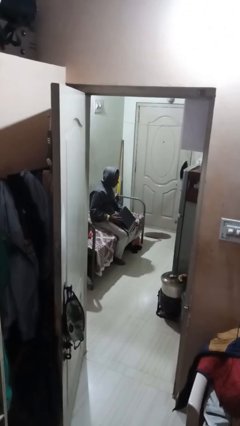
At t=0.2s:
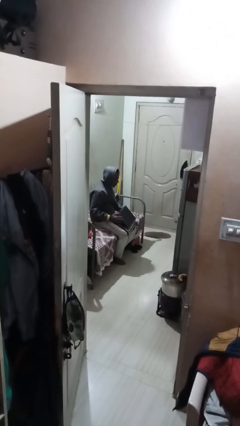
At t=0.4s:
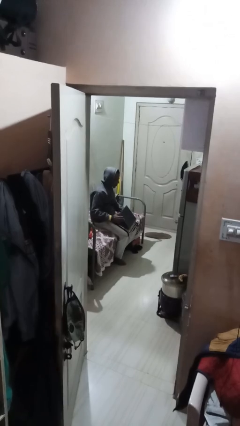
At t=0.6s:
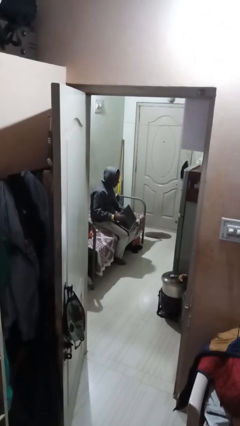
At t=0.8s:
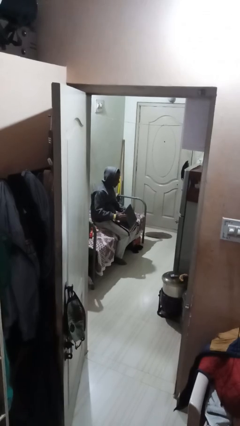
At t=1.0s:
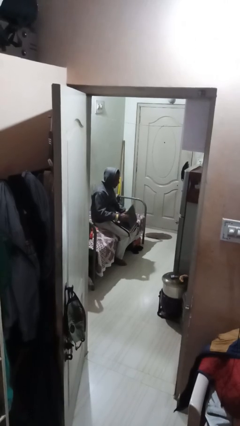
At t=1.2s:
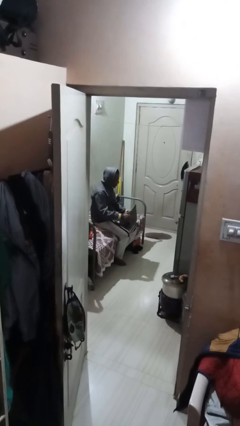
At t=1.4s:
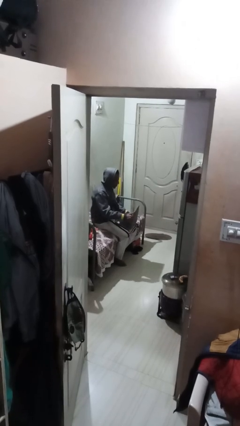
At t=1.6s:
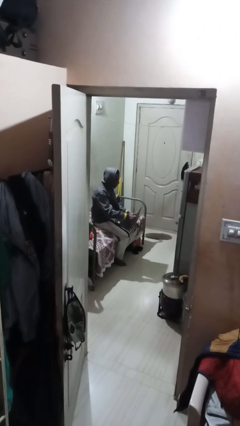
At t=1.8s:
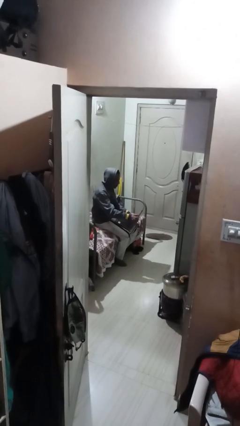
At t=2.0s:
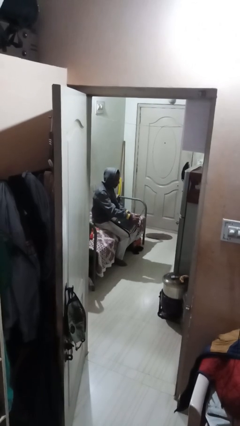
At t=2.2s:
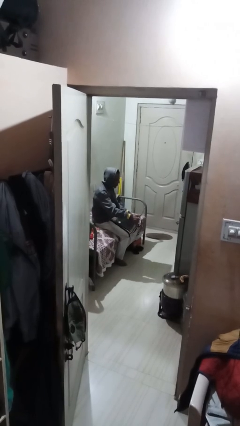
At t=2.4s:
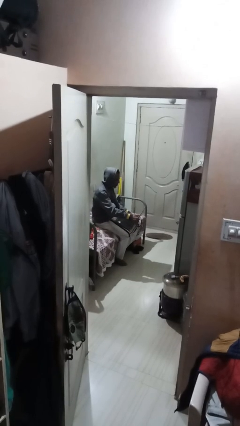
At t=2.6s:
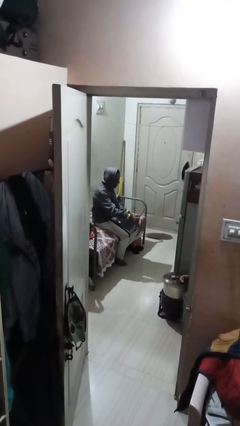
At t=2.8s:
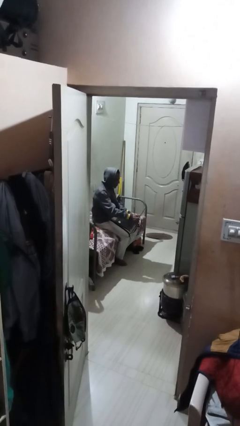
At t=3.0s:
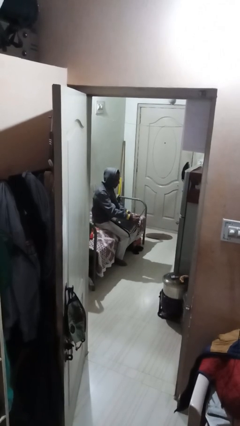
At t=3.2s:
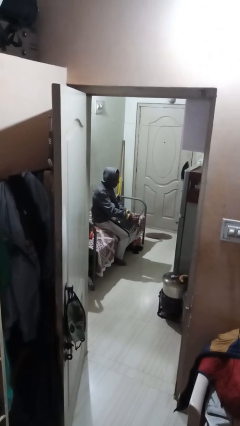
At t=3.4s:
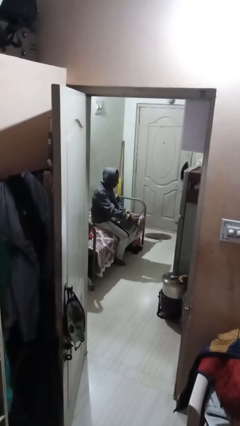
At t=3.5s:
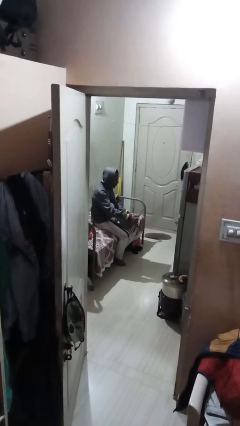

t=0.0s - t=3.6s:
person interacts with laptop

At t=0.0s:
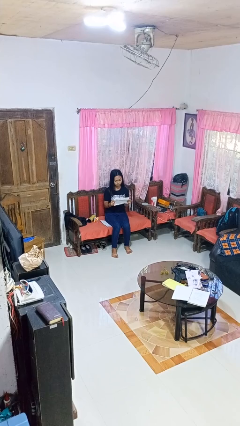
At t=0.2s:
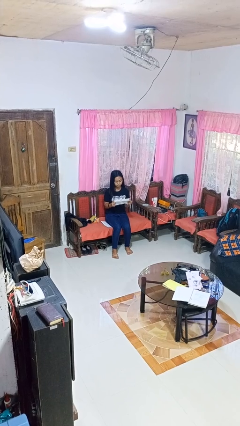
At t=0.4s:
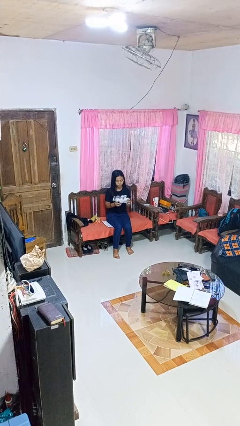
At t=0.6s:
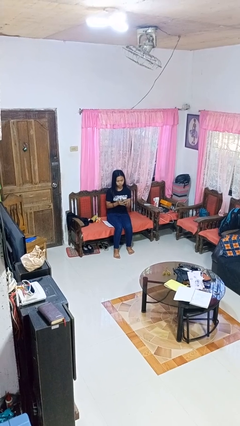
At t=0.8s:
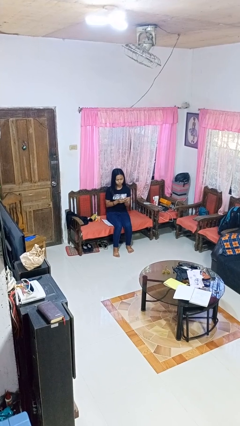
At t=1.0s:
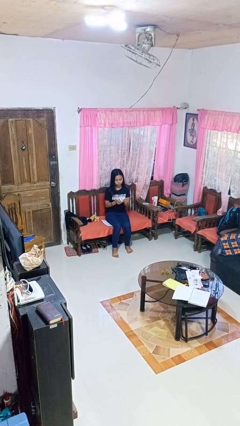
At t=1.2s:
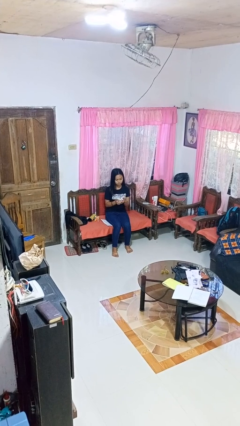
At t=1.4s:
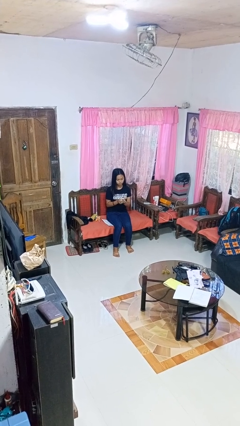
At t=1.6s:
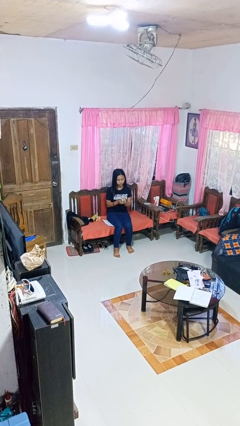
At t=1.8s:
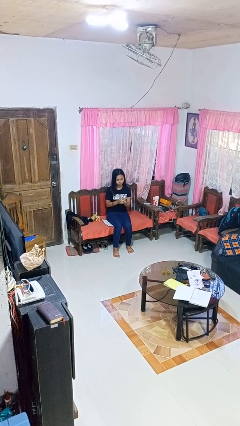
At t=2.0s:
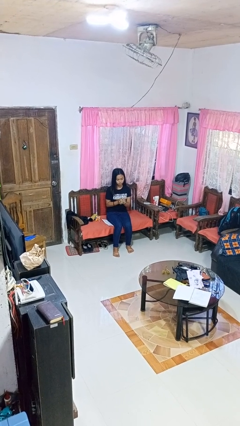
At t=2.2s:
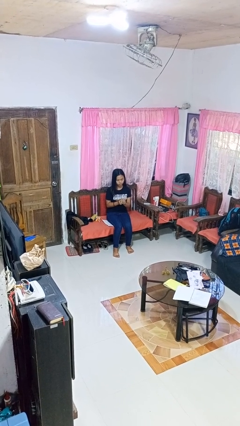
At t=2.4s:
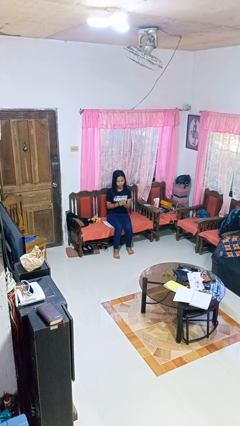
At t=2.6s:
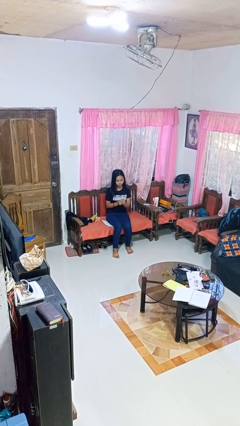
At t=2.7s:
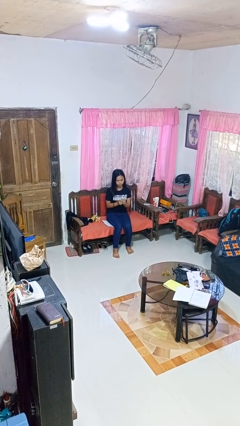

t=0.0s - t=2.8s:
person crumples paper

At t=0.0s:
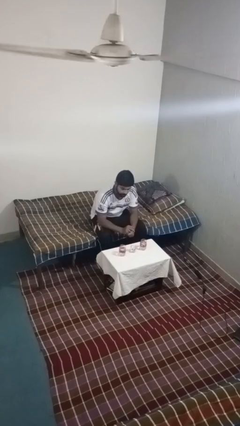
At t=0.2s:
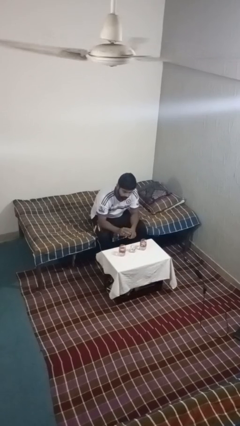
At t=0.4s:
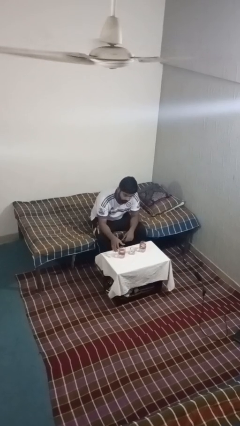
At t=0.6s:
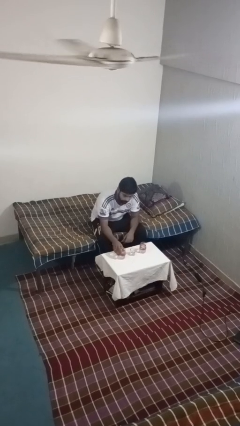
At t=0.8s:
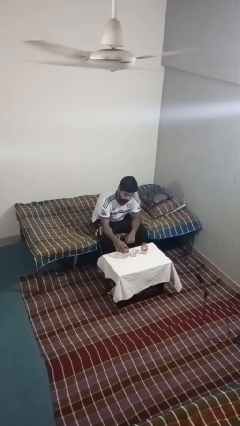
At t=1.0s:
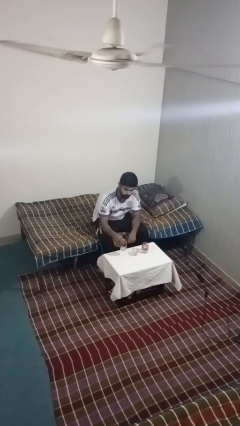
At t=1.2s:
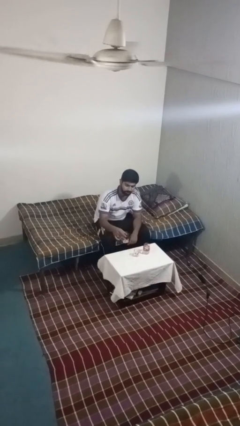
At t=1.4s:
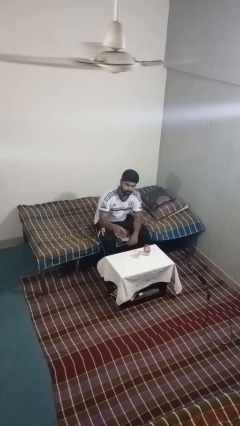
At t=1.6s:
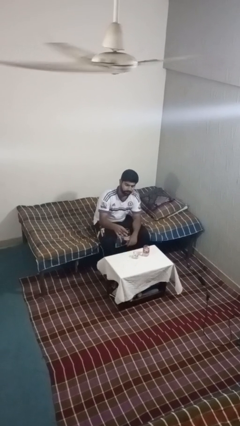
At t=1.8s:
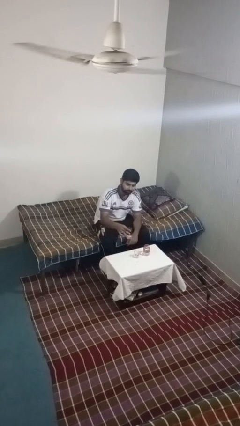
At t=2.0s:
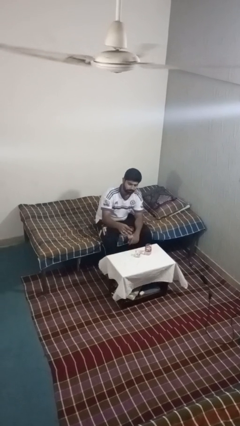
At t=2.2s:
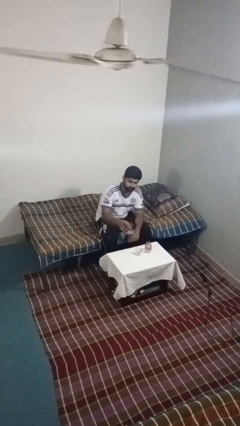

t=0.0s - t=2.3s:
person picks up object from table

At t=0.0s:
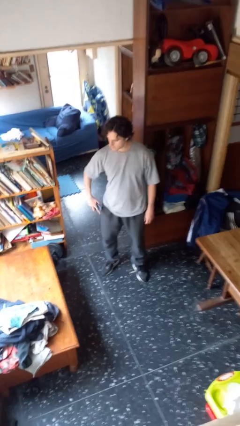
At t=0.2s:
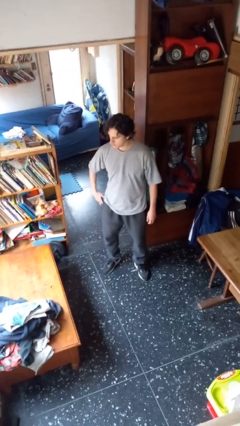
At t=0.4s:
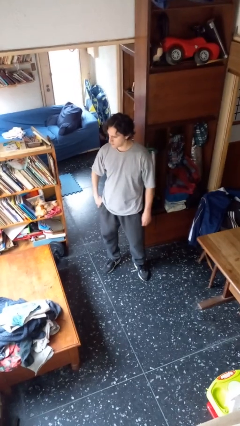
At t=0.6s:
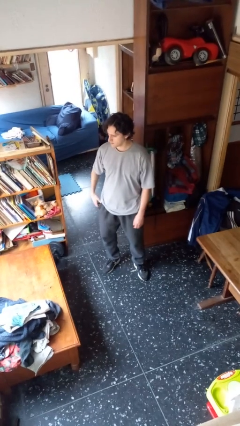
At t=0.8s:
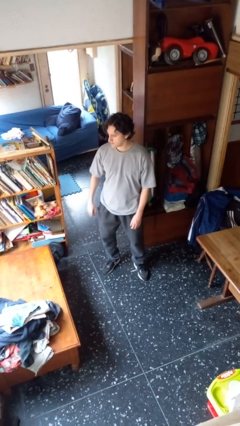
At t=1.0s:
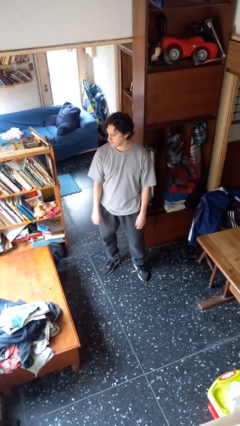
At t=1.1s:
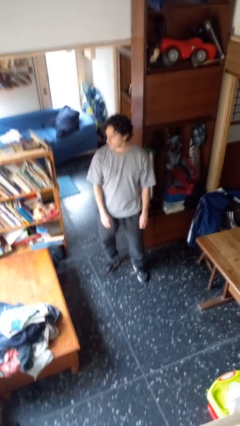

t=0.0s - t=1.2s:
person puts phone into pocket

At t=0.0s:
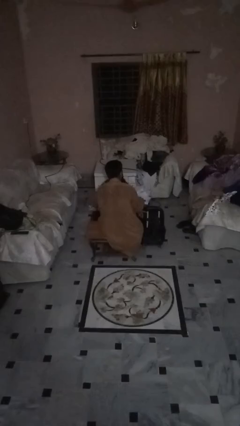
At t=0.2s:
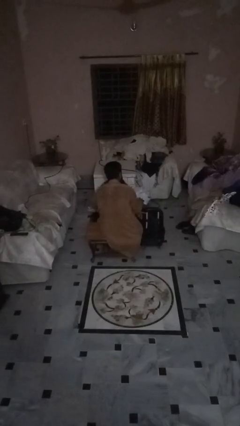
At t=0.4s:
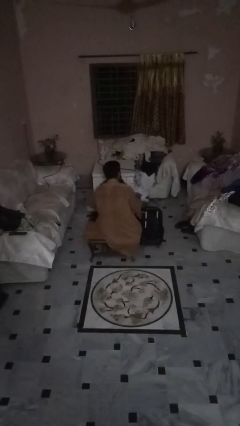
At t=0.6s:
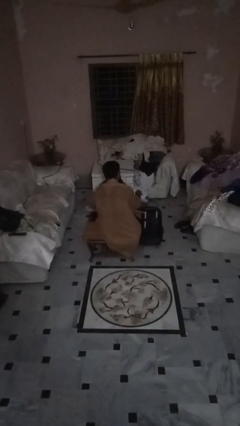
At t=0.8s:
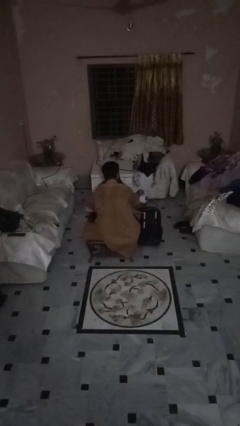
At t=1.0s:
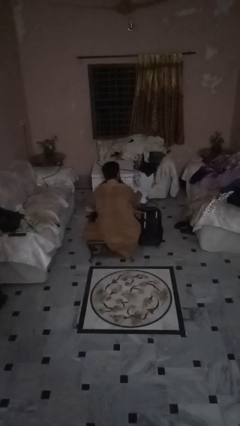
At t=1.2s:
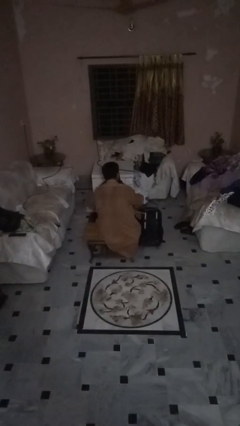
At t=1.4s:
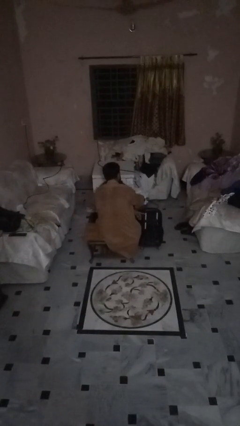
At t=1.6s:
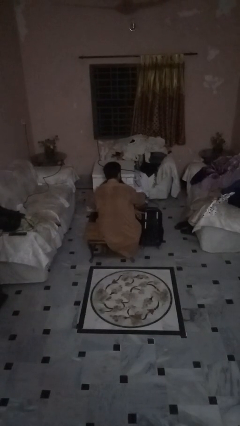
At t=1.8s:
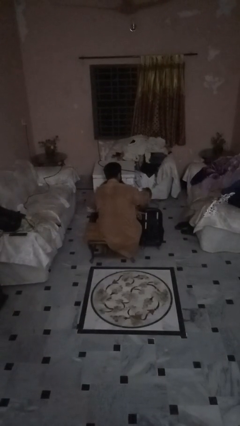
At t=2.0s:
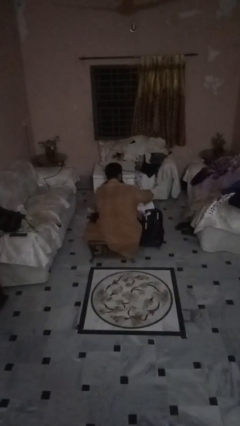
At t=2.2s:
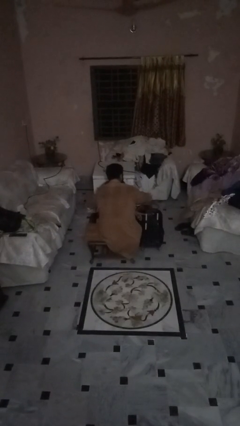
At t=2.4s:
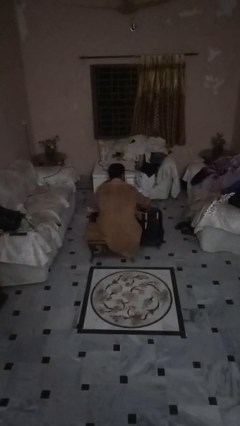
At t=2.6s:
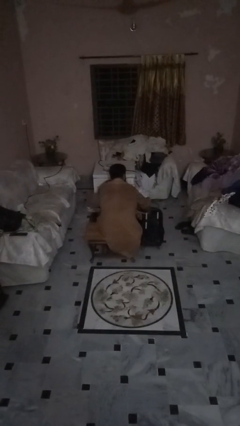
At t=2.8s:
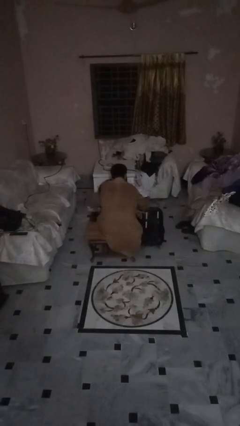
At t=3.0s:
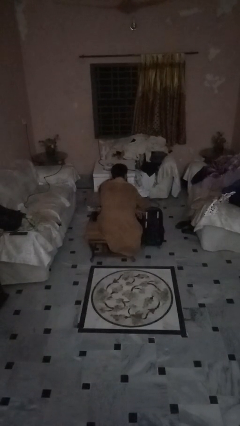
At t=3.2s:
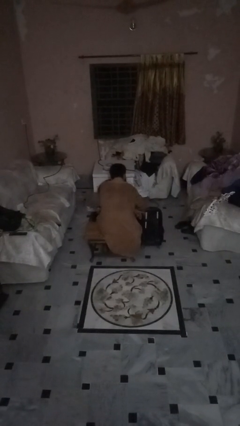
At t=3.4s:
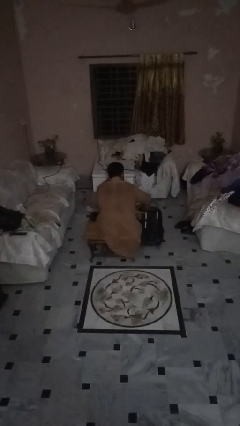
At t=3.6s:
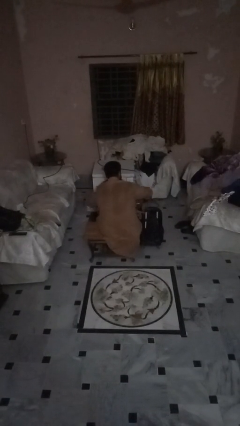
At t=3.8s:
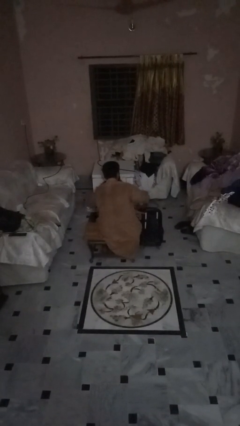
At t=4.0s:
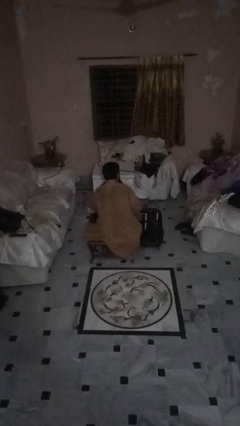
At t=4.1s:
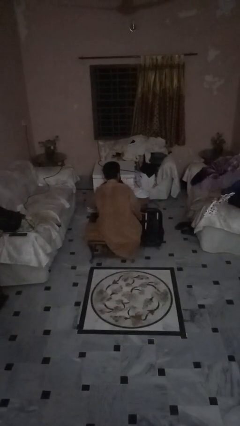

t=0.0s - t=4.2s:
person loads clothes into suitcase

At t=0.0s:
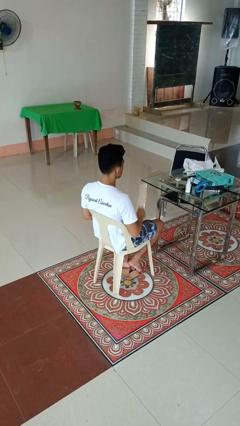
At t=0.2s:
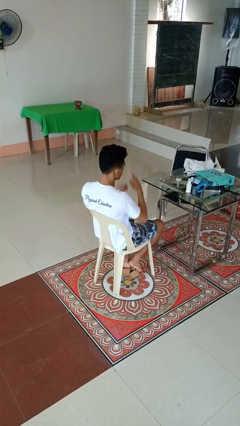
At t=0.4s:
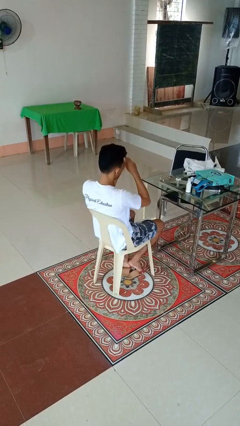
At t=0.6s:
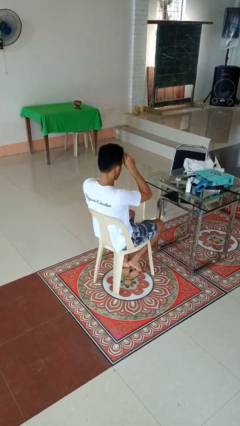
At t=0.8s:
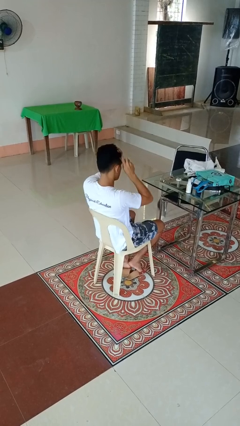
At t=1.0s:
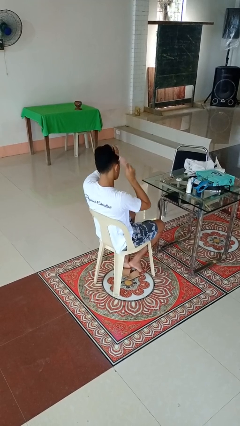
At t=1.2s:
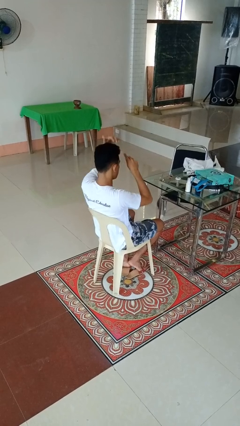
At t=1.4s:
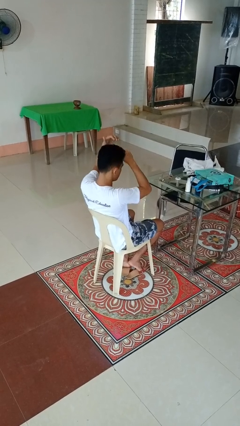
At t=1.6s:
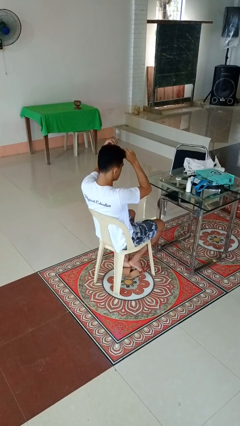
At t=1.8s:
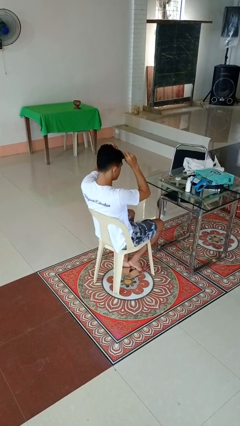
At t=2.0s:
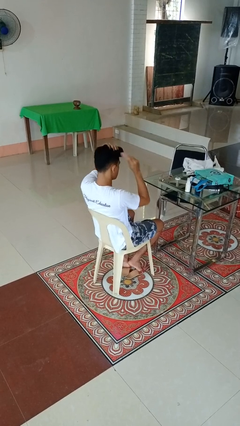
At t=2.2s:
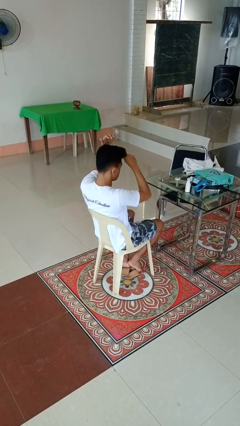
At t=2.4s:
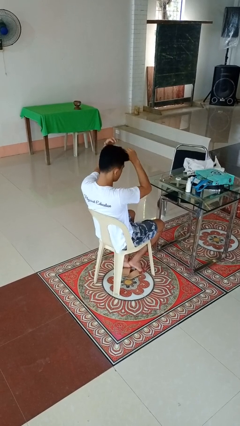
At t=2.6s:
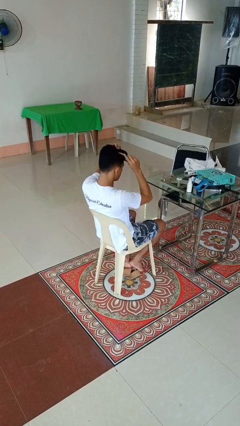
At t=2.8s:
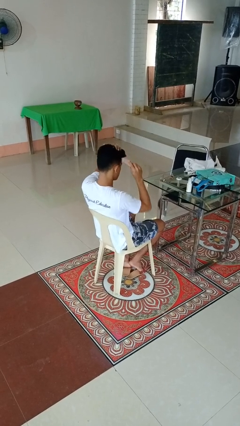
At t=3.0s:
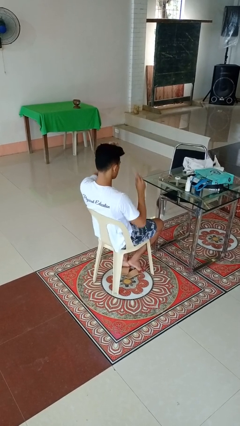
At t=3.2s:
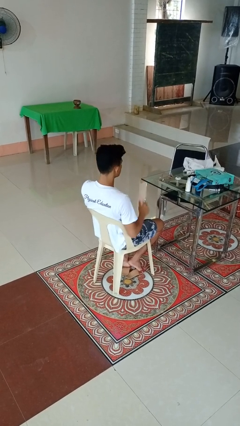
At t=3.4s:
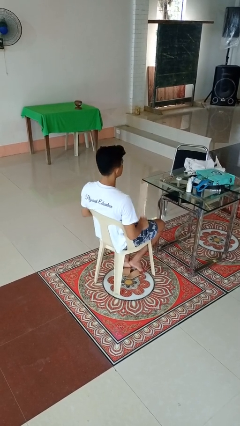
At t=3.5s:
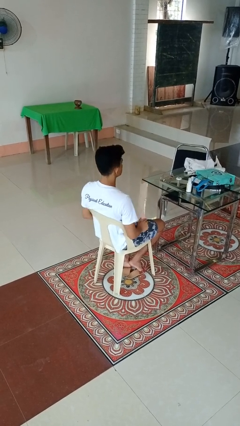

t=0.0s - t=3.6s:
person brushes hair
